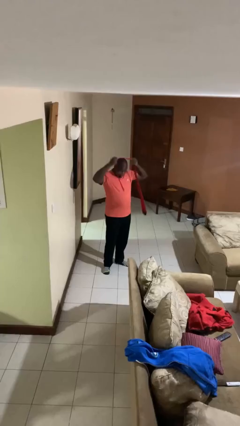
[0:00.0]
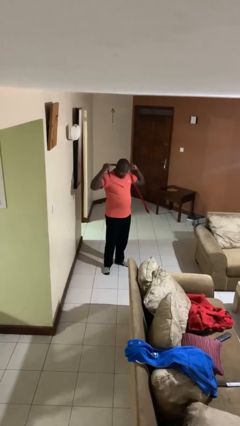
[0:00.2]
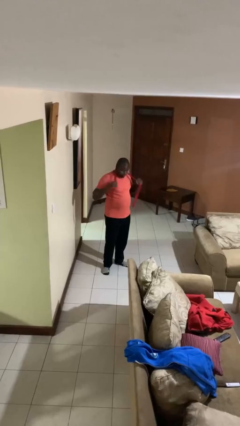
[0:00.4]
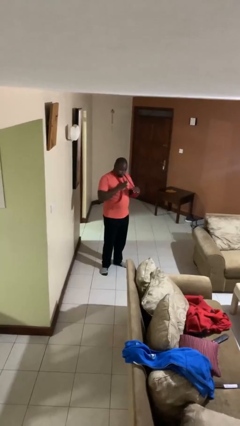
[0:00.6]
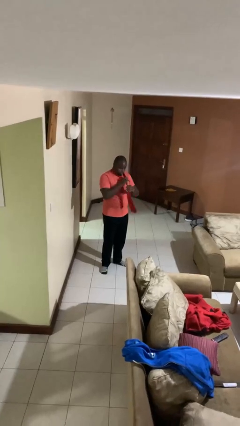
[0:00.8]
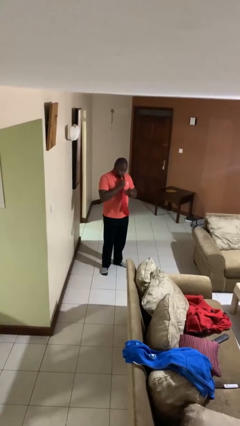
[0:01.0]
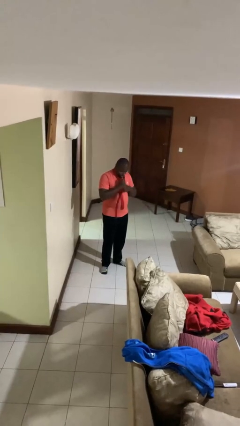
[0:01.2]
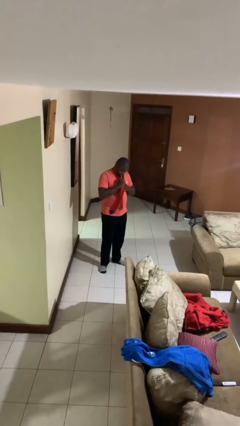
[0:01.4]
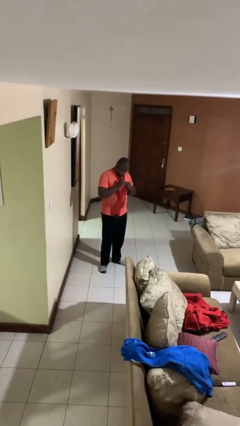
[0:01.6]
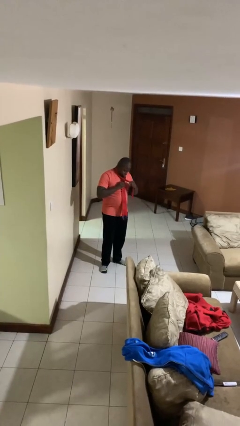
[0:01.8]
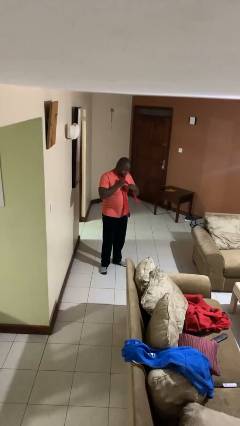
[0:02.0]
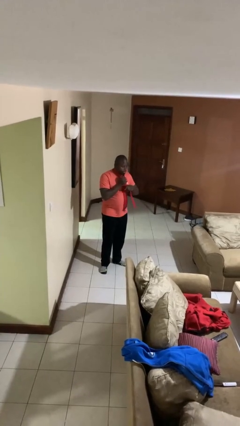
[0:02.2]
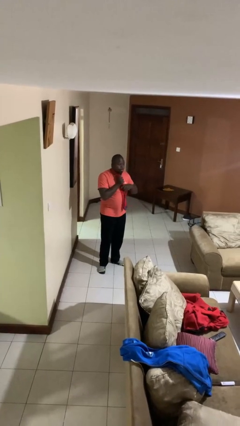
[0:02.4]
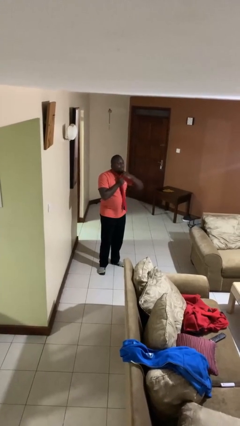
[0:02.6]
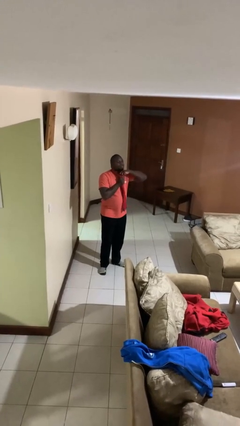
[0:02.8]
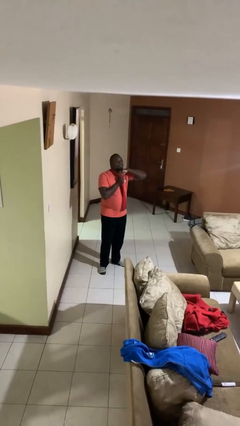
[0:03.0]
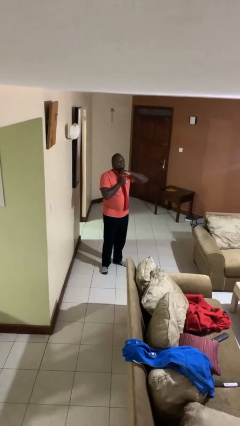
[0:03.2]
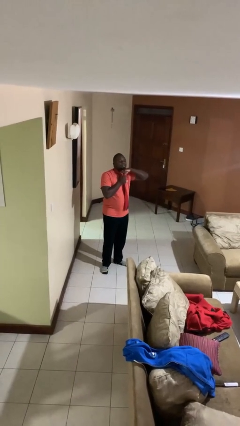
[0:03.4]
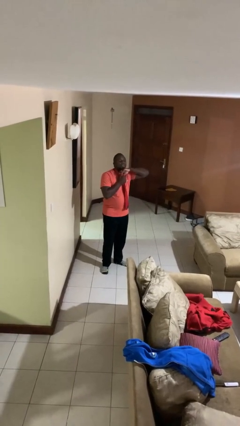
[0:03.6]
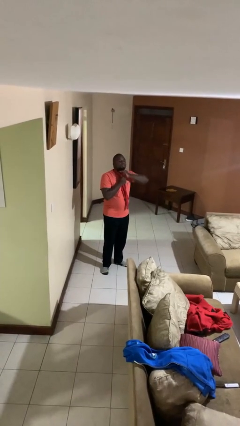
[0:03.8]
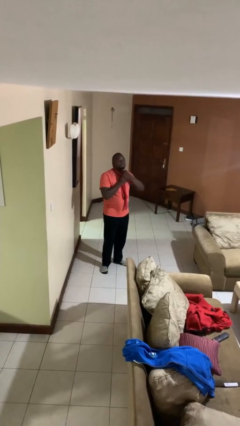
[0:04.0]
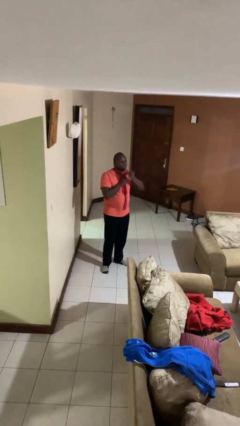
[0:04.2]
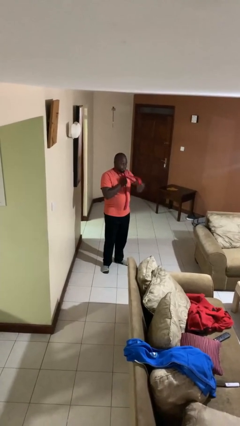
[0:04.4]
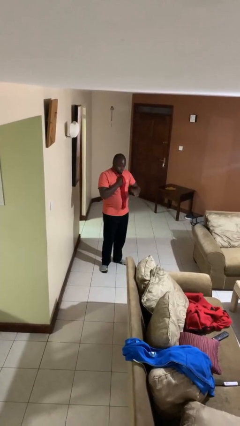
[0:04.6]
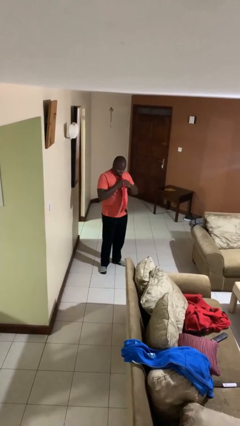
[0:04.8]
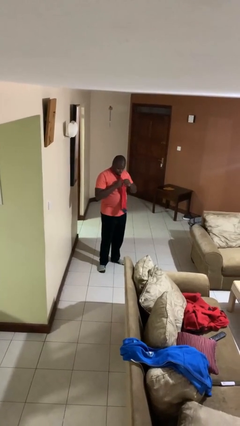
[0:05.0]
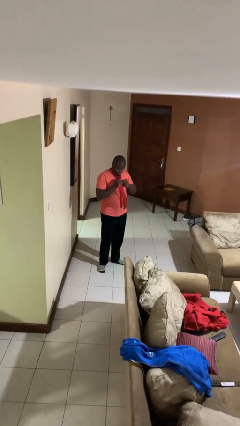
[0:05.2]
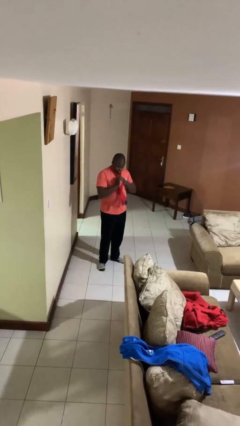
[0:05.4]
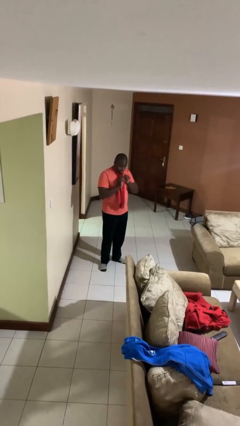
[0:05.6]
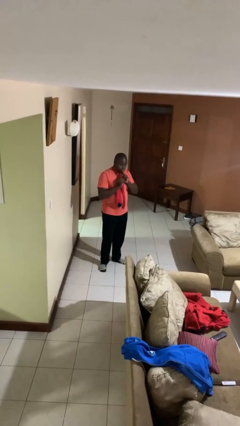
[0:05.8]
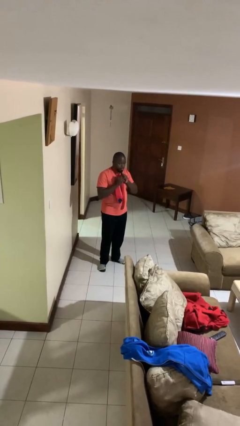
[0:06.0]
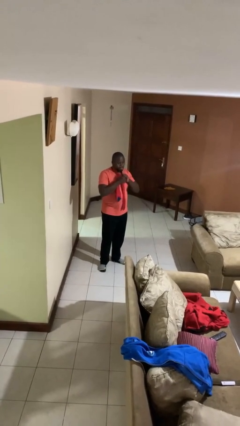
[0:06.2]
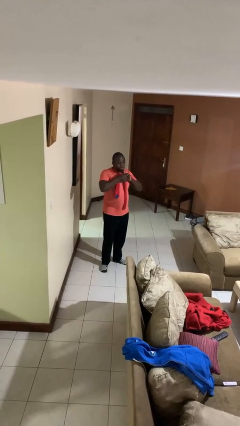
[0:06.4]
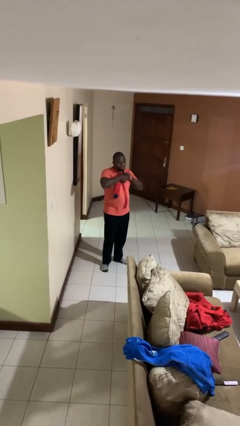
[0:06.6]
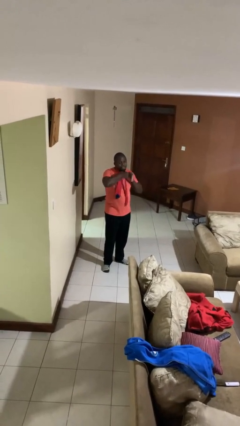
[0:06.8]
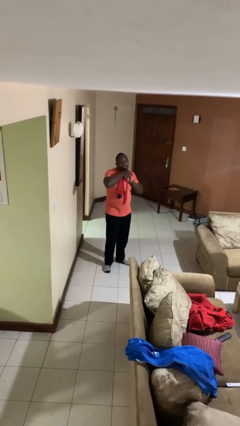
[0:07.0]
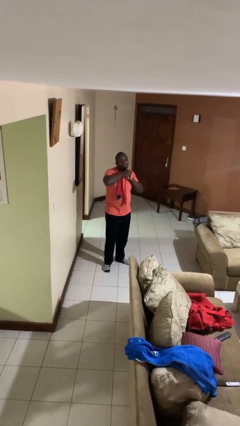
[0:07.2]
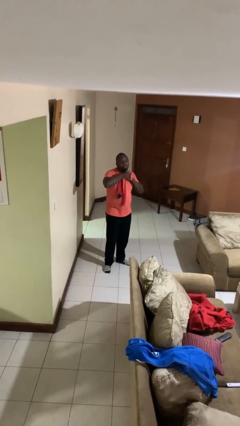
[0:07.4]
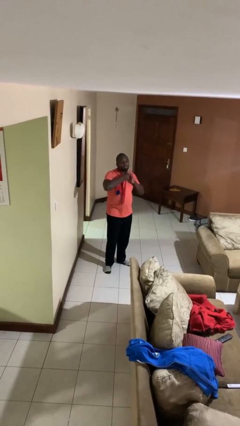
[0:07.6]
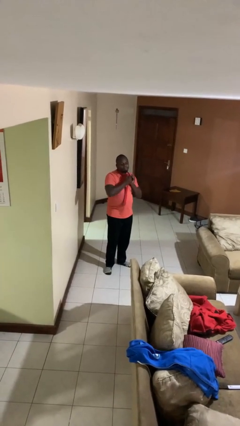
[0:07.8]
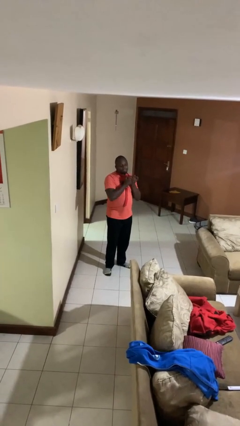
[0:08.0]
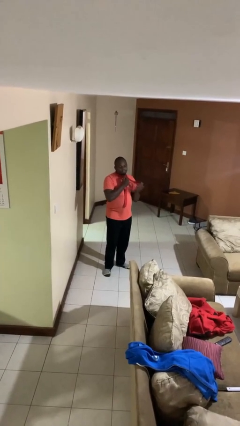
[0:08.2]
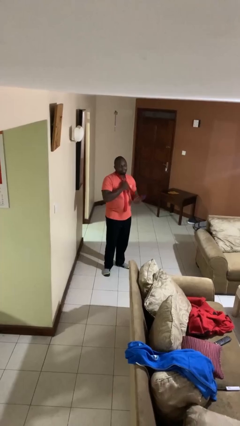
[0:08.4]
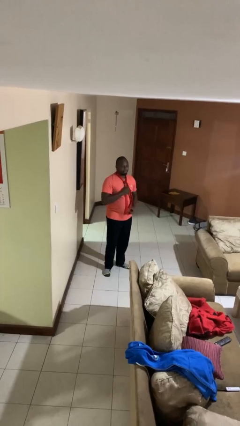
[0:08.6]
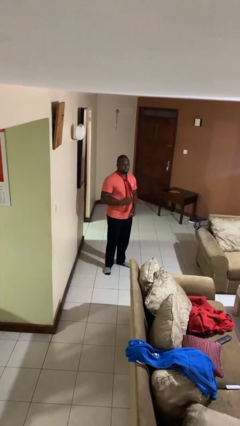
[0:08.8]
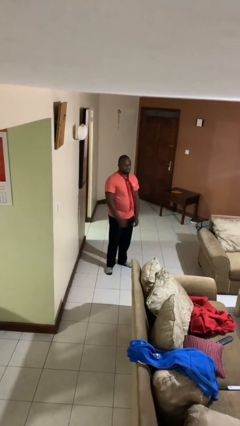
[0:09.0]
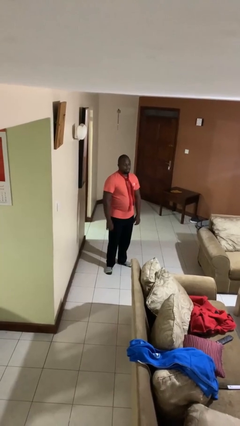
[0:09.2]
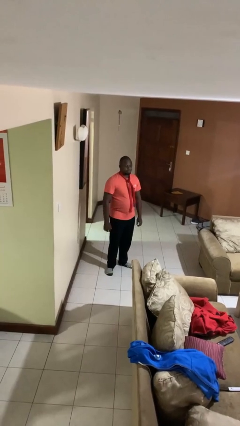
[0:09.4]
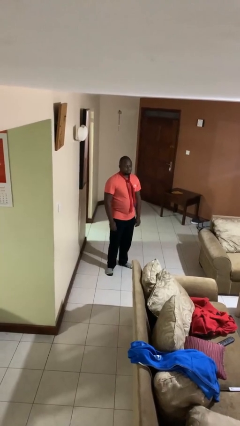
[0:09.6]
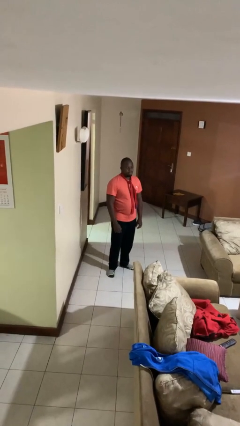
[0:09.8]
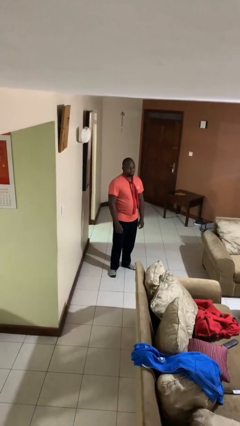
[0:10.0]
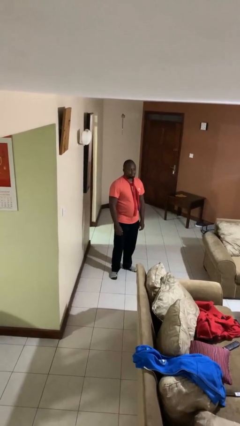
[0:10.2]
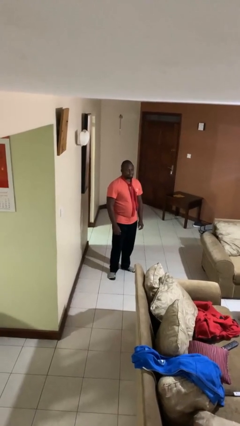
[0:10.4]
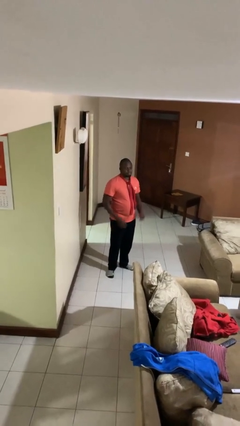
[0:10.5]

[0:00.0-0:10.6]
person puts on necktie

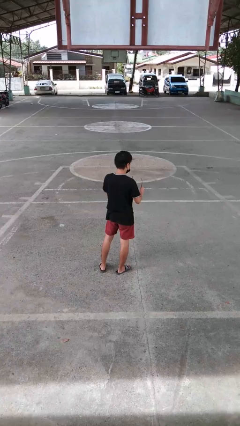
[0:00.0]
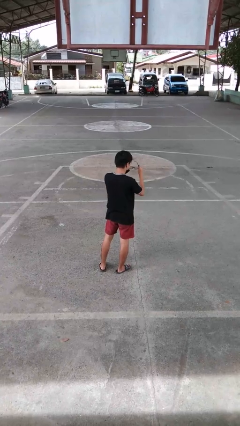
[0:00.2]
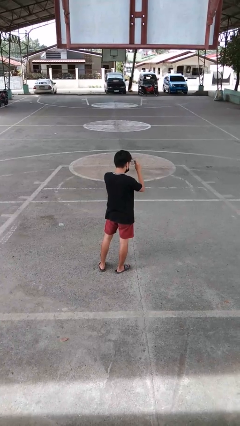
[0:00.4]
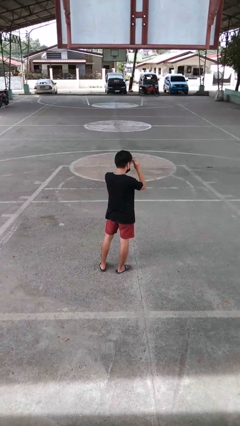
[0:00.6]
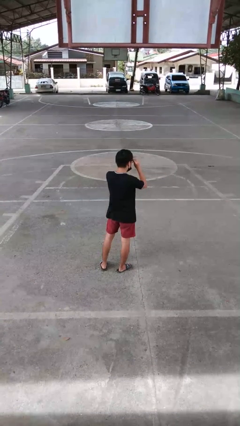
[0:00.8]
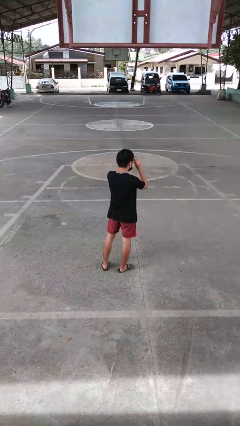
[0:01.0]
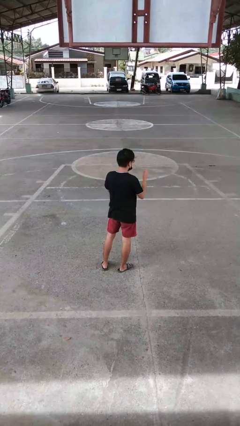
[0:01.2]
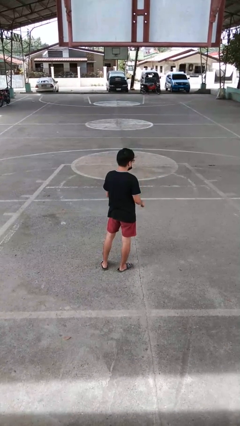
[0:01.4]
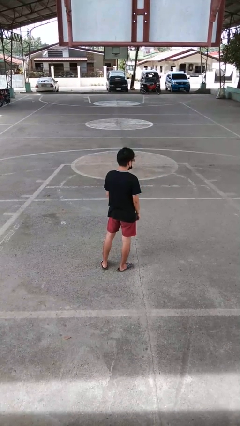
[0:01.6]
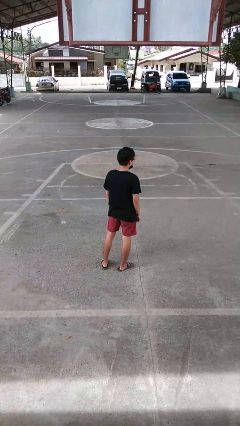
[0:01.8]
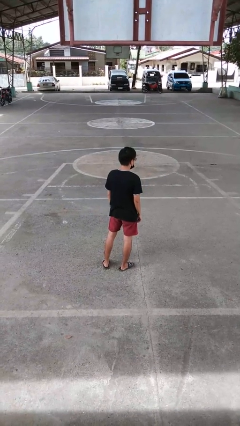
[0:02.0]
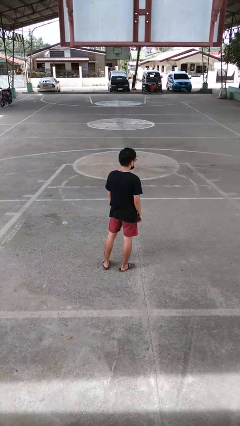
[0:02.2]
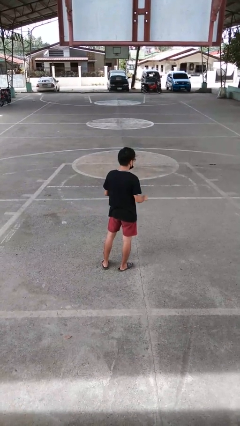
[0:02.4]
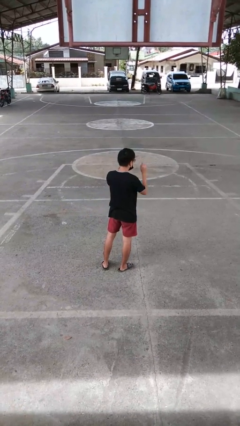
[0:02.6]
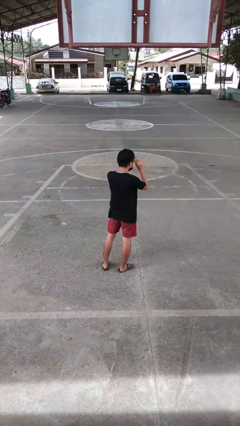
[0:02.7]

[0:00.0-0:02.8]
person puts on glasses

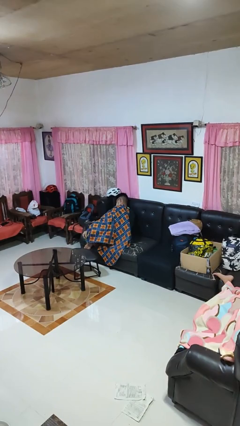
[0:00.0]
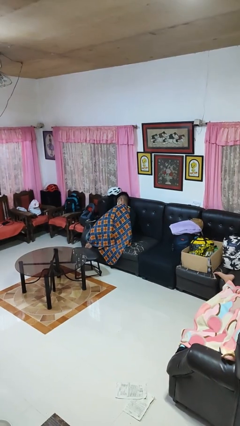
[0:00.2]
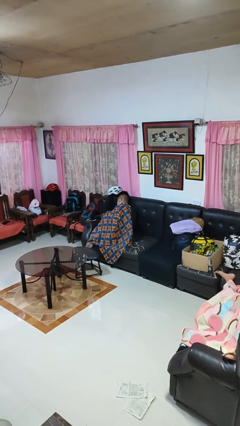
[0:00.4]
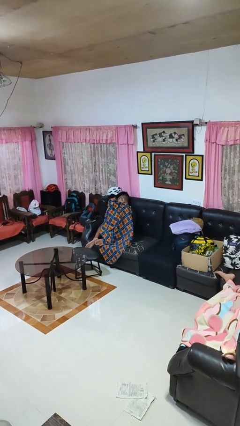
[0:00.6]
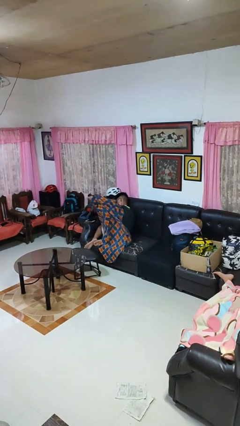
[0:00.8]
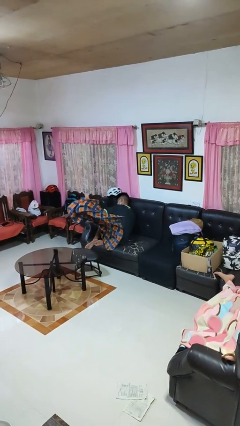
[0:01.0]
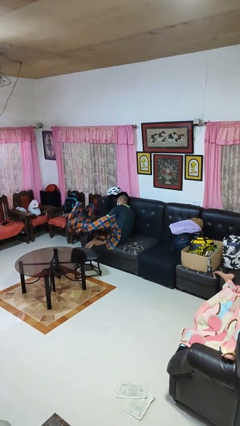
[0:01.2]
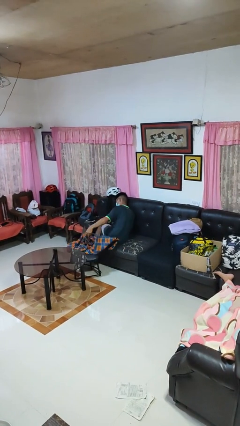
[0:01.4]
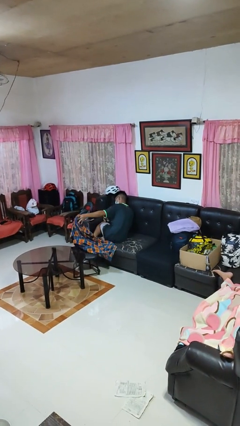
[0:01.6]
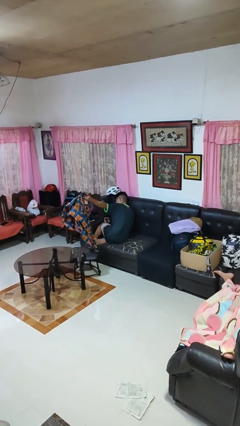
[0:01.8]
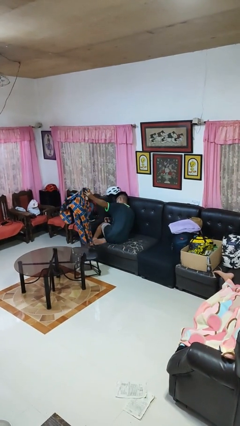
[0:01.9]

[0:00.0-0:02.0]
person uncovers with blanket

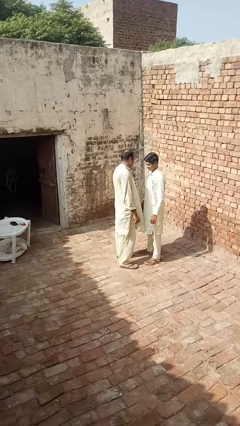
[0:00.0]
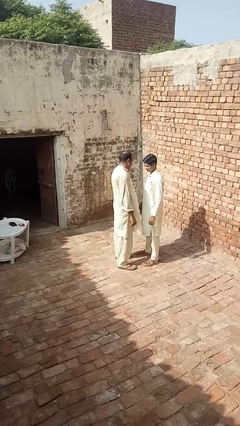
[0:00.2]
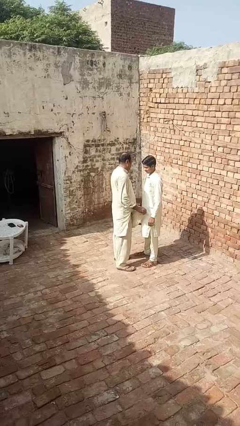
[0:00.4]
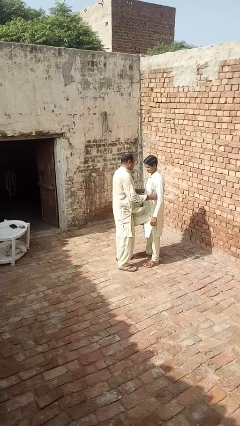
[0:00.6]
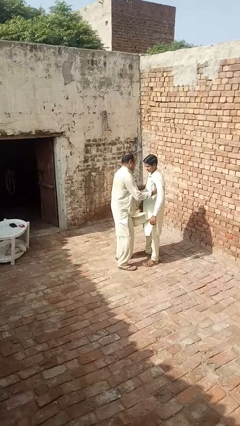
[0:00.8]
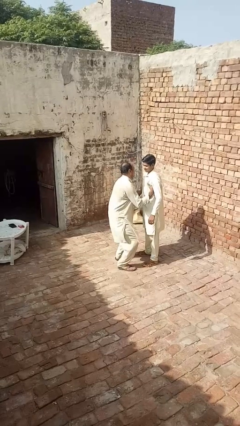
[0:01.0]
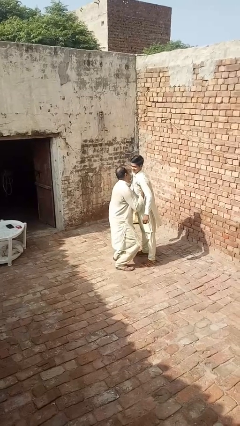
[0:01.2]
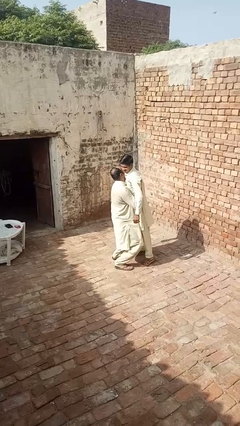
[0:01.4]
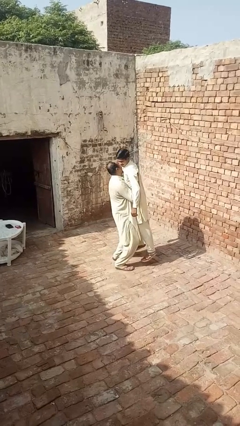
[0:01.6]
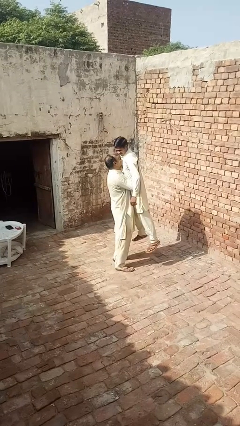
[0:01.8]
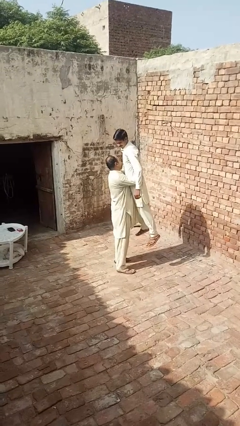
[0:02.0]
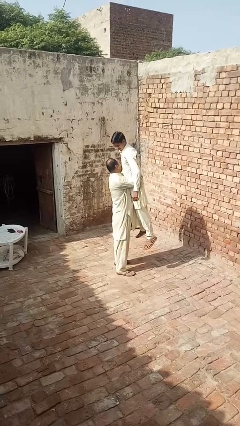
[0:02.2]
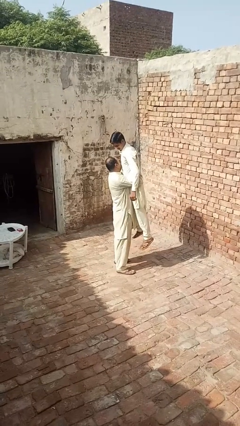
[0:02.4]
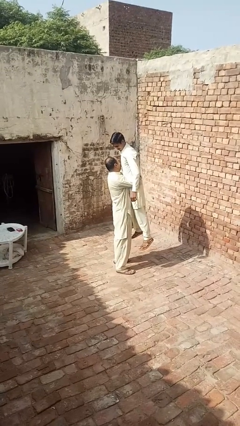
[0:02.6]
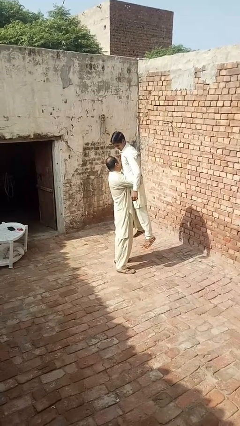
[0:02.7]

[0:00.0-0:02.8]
person picks up person
